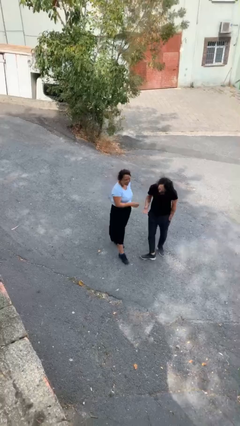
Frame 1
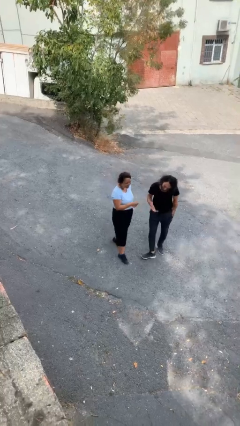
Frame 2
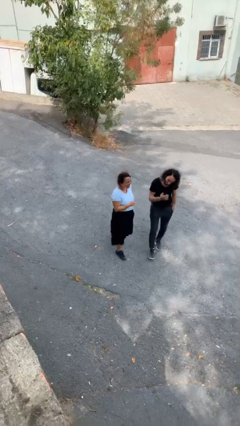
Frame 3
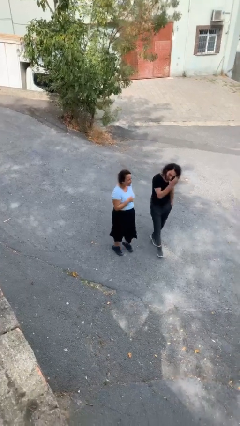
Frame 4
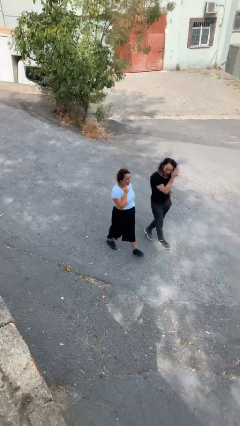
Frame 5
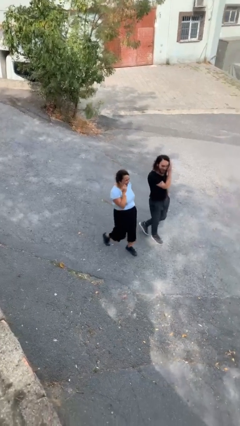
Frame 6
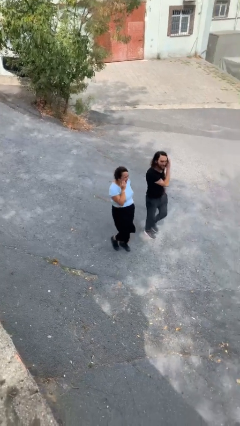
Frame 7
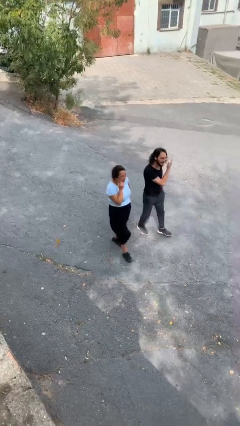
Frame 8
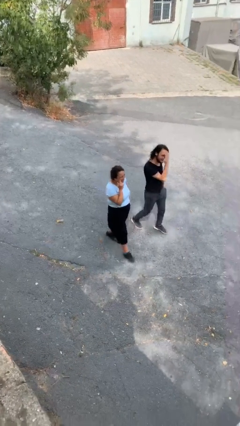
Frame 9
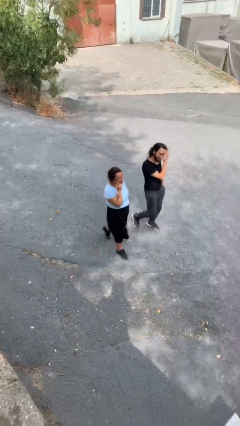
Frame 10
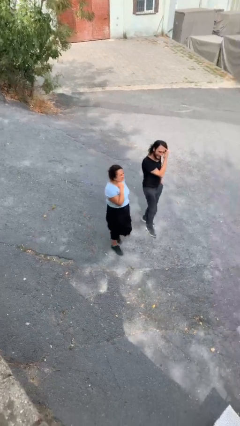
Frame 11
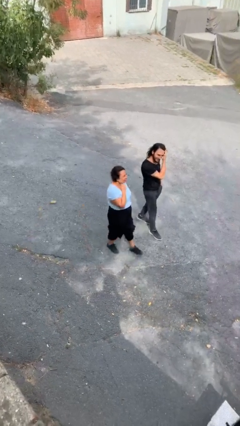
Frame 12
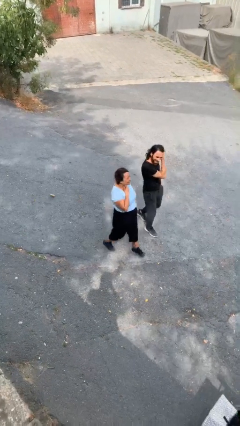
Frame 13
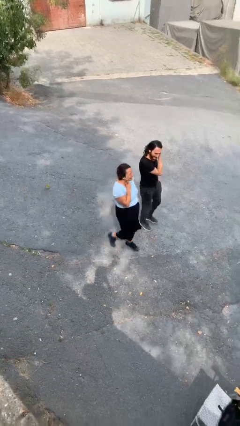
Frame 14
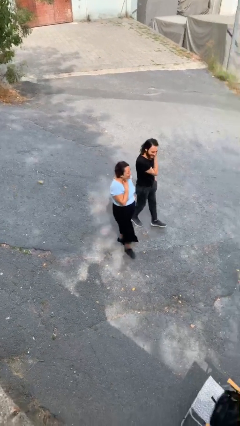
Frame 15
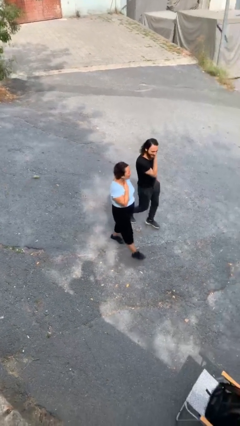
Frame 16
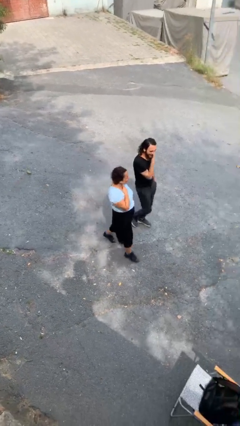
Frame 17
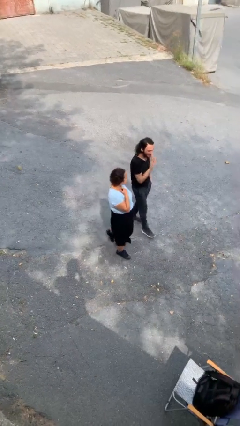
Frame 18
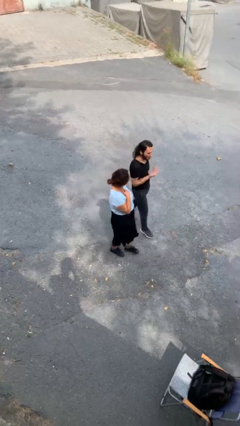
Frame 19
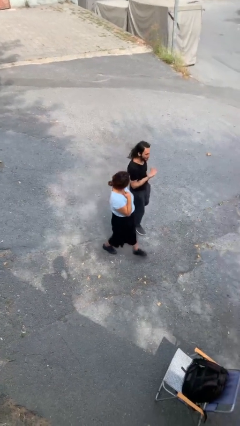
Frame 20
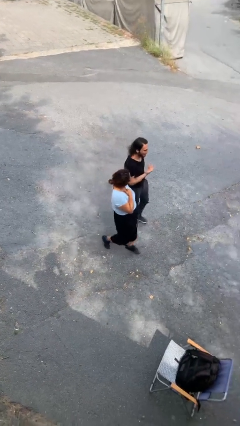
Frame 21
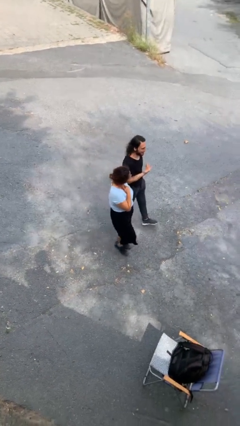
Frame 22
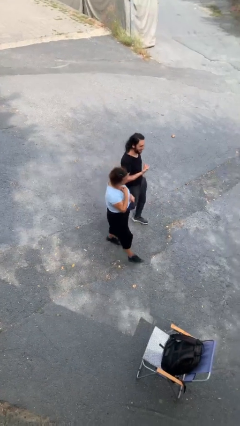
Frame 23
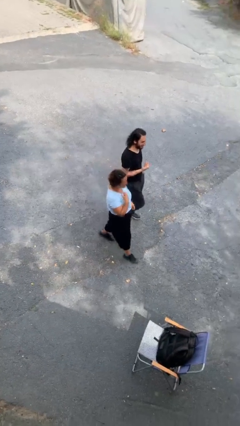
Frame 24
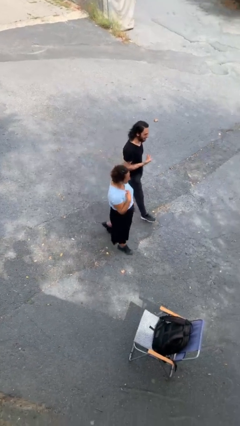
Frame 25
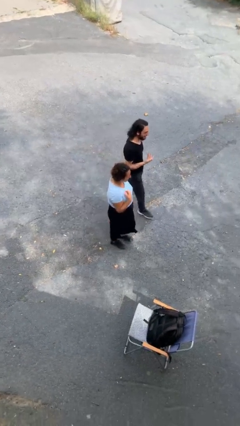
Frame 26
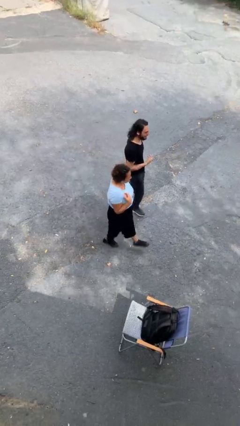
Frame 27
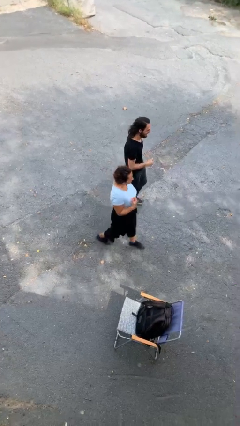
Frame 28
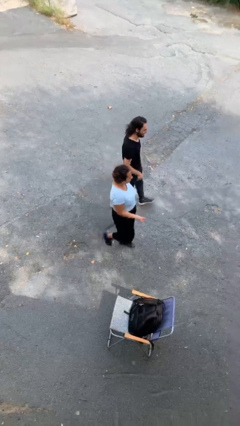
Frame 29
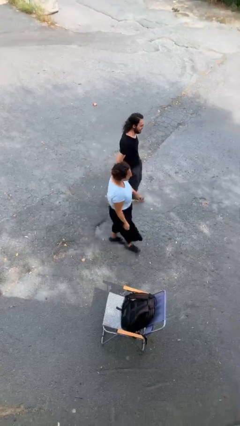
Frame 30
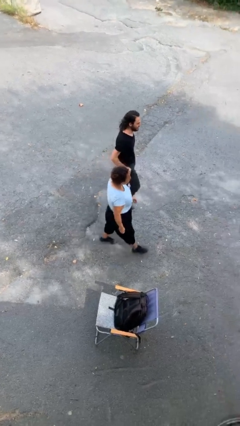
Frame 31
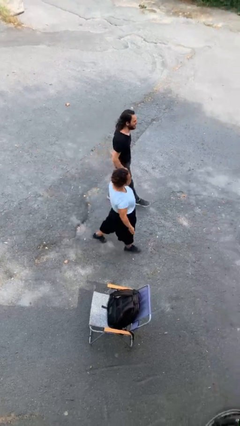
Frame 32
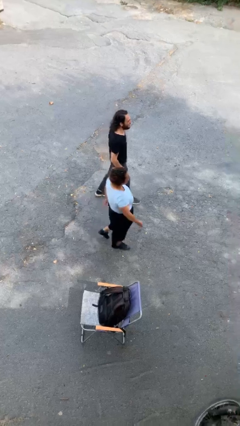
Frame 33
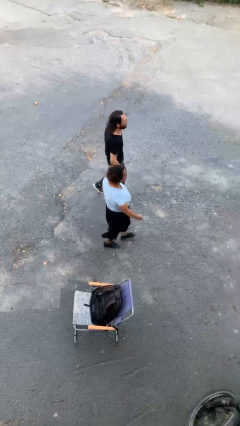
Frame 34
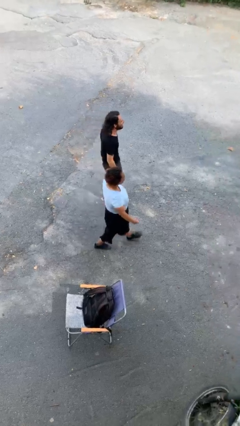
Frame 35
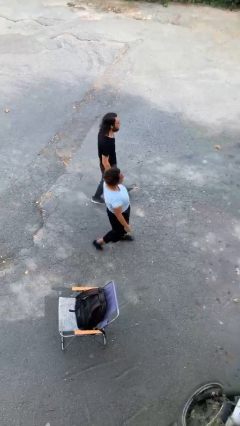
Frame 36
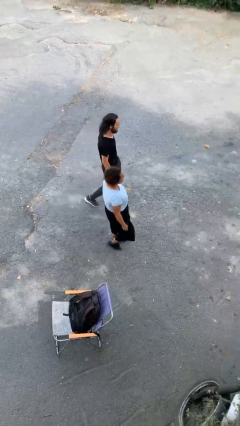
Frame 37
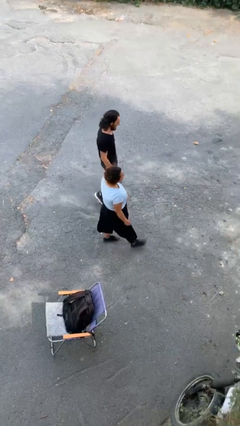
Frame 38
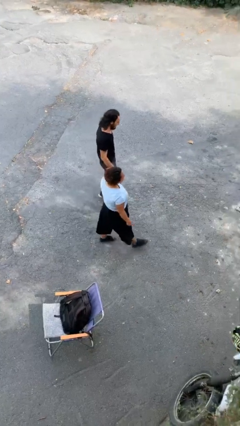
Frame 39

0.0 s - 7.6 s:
person talks to person

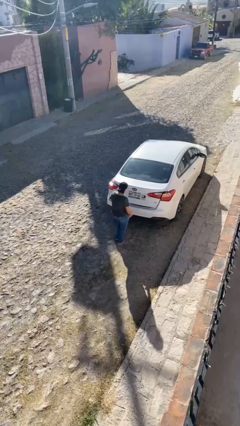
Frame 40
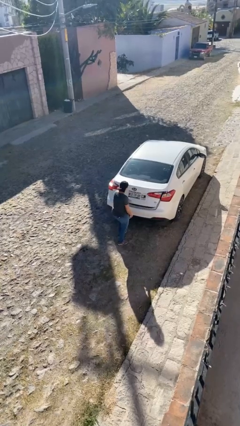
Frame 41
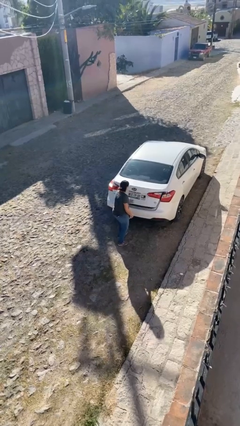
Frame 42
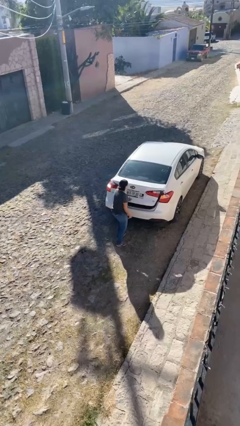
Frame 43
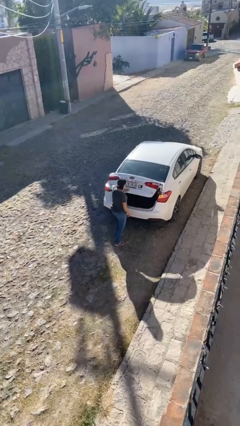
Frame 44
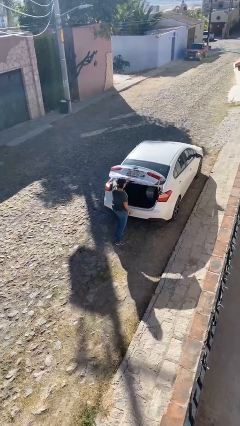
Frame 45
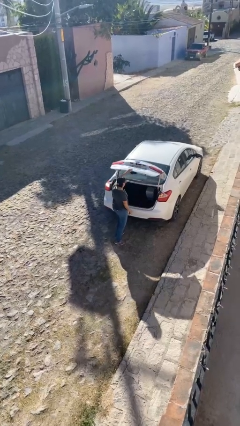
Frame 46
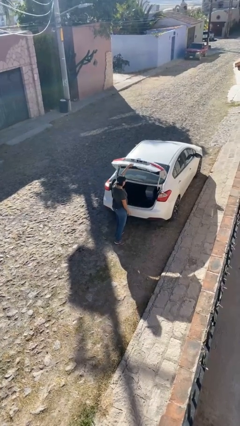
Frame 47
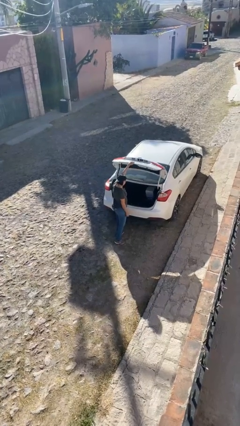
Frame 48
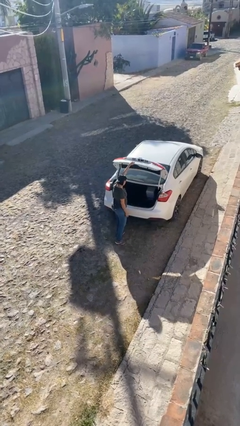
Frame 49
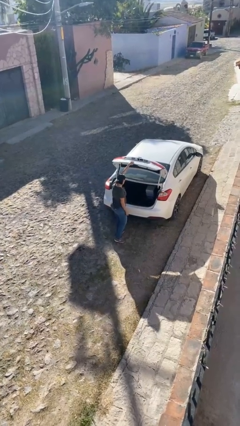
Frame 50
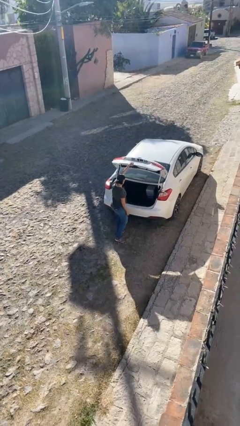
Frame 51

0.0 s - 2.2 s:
person opens car trunk

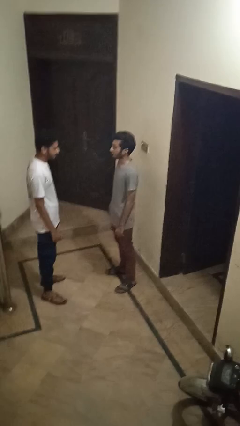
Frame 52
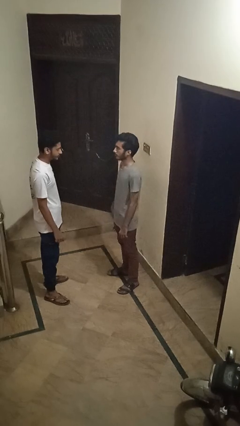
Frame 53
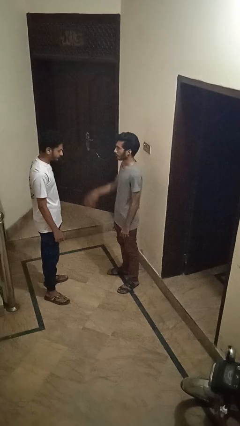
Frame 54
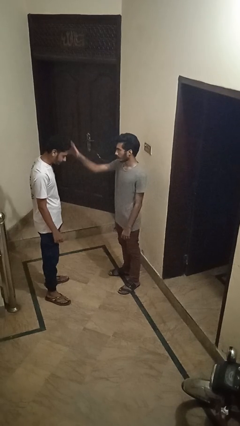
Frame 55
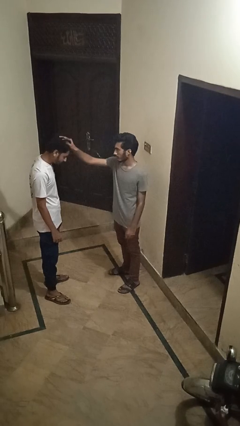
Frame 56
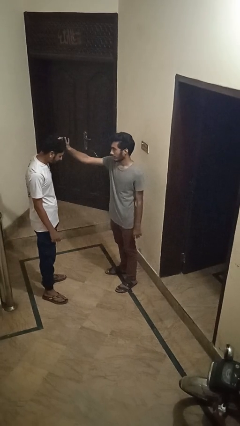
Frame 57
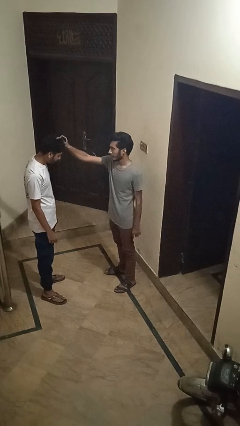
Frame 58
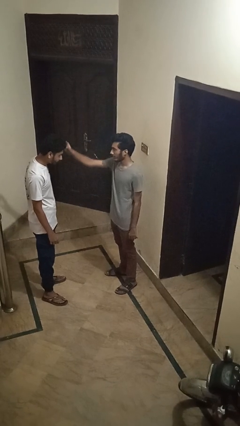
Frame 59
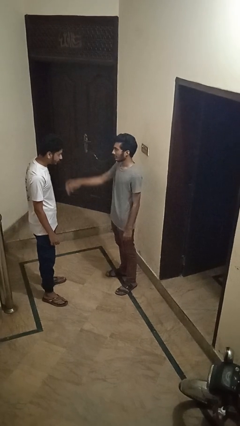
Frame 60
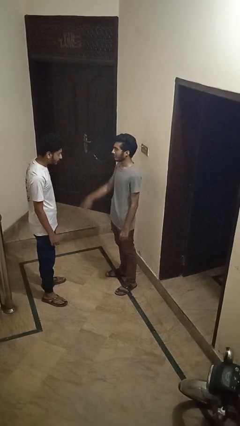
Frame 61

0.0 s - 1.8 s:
person grabs person by hair

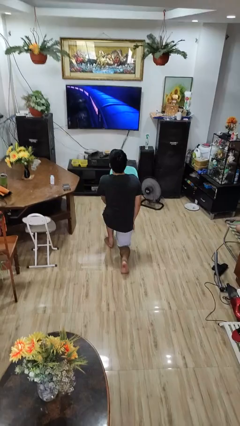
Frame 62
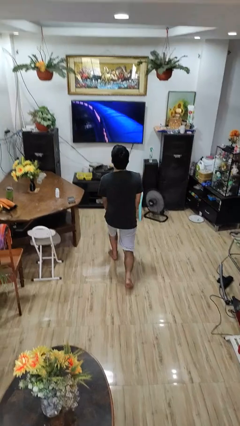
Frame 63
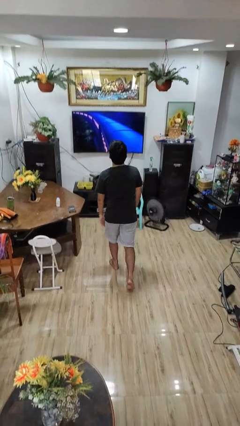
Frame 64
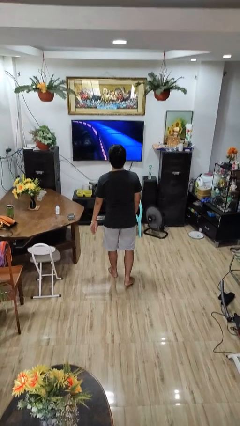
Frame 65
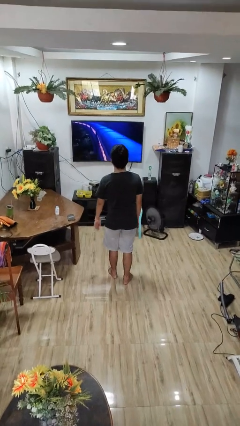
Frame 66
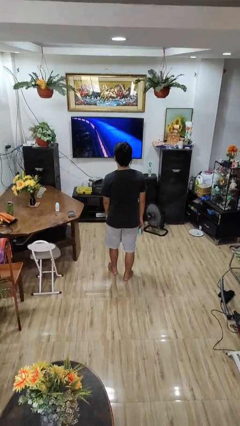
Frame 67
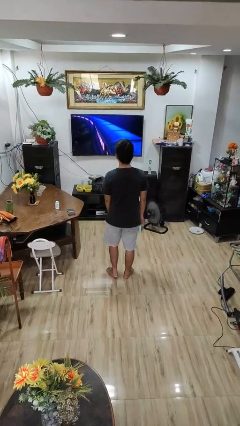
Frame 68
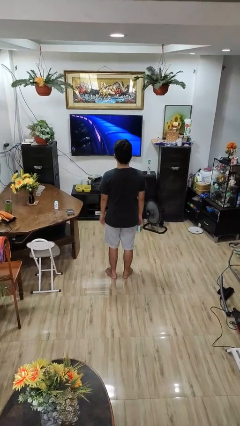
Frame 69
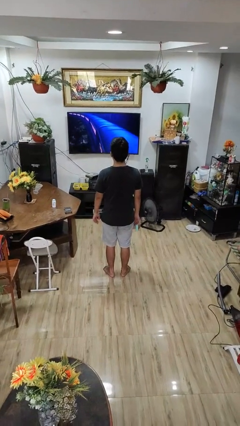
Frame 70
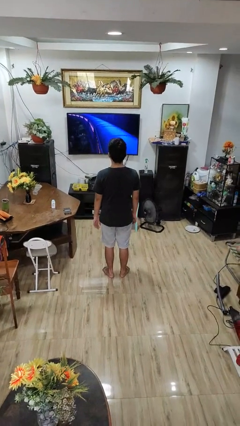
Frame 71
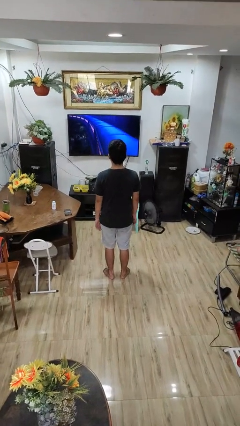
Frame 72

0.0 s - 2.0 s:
person stands up from floor

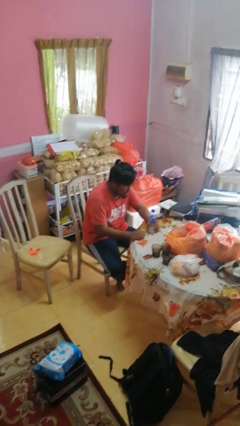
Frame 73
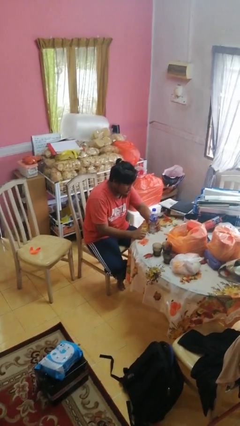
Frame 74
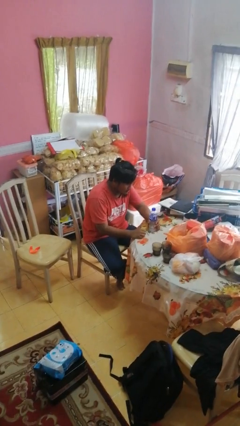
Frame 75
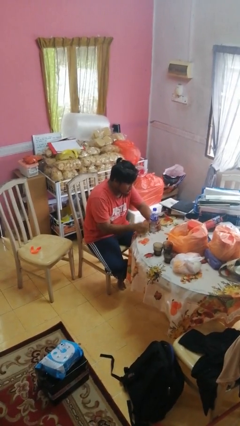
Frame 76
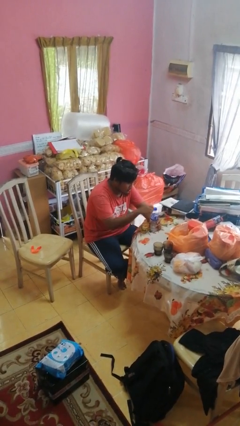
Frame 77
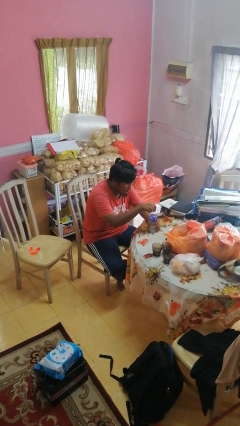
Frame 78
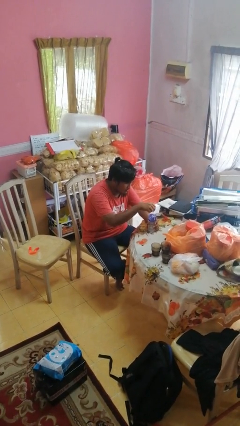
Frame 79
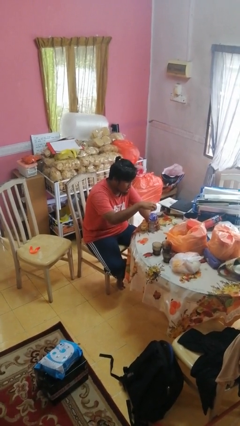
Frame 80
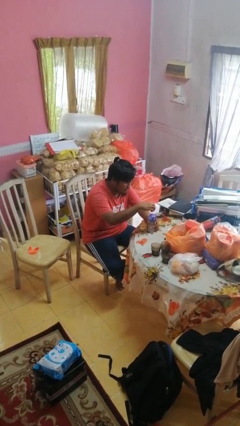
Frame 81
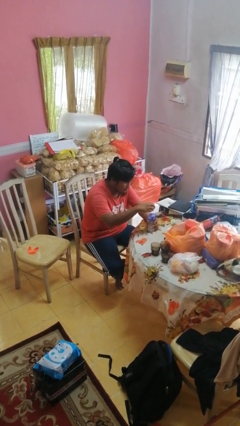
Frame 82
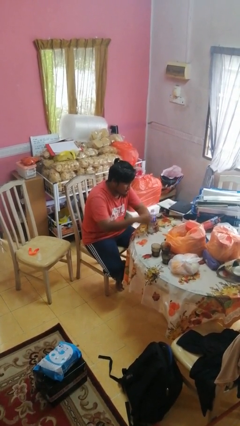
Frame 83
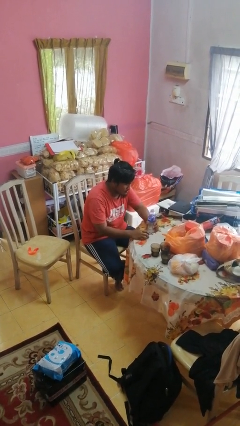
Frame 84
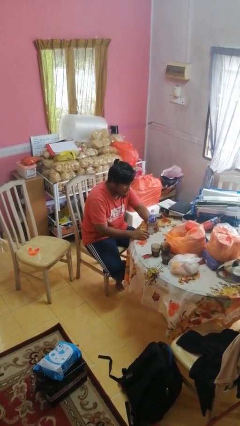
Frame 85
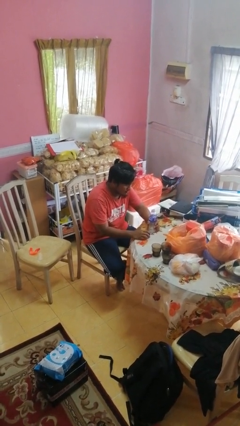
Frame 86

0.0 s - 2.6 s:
person unscrews lid from bottle

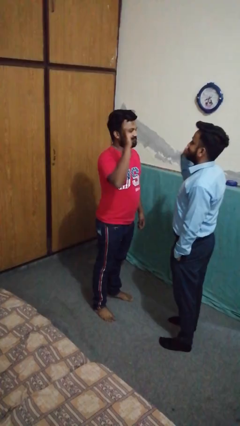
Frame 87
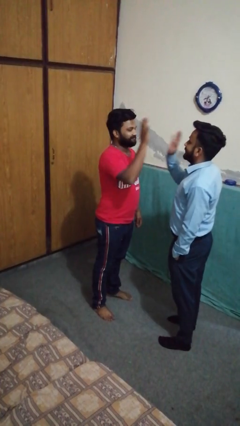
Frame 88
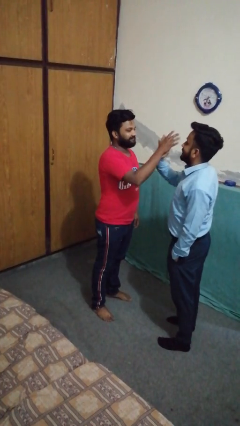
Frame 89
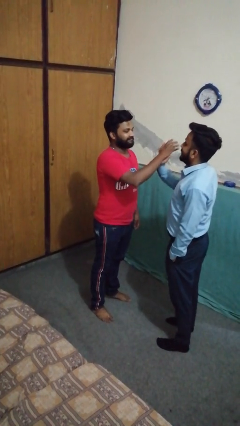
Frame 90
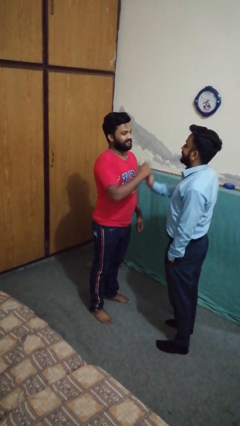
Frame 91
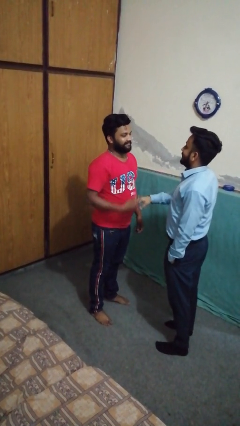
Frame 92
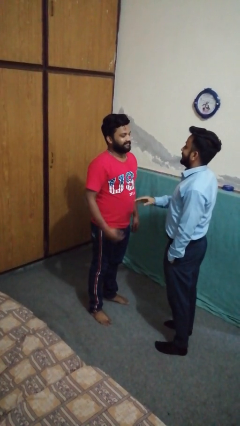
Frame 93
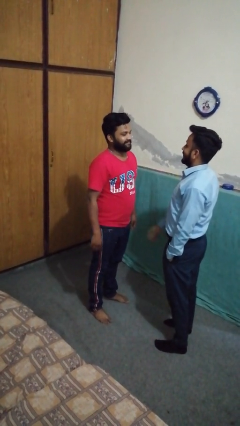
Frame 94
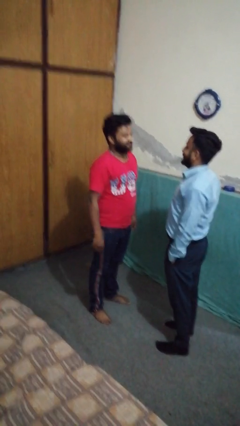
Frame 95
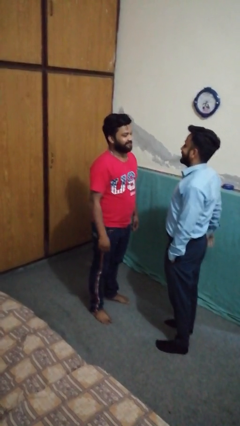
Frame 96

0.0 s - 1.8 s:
person highfives hand
